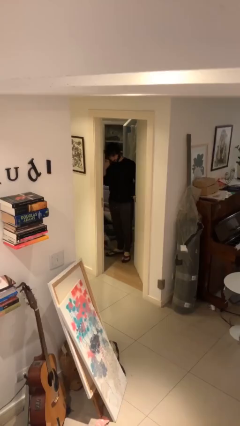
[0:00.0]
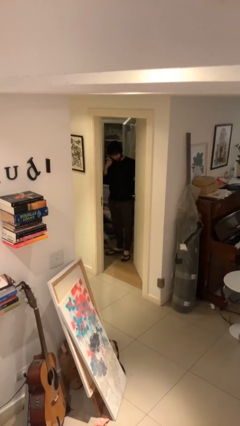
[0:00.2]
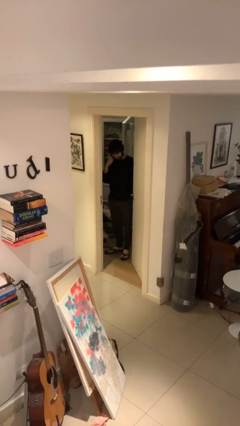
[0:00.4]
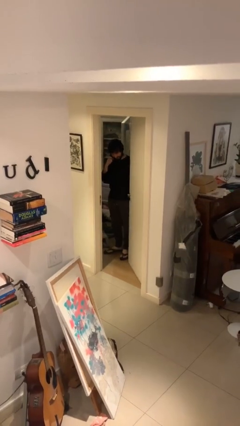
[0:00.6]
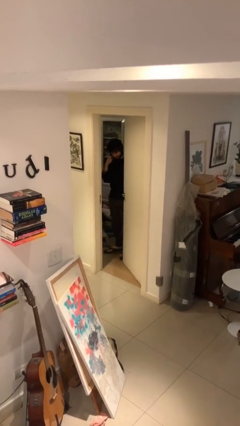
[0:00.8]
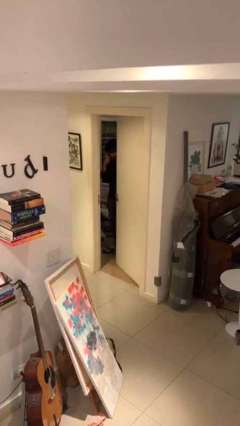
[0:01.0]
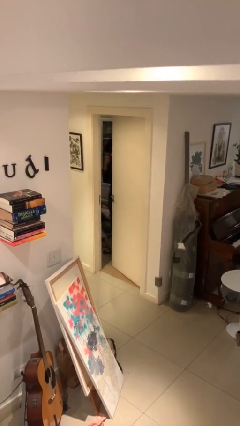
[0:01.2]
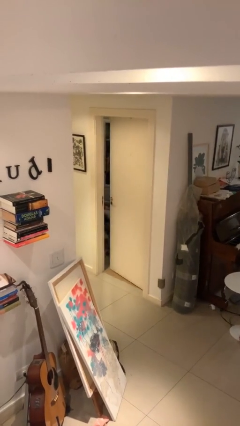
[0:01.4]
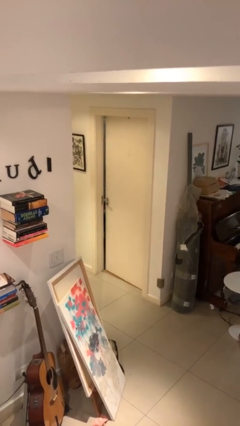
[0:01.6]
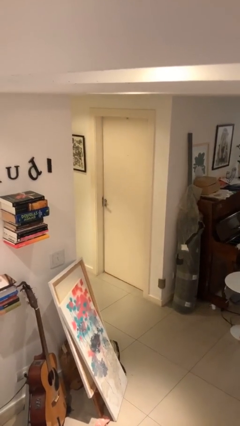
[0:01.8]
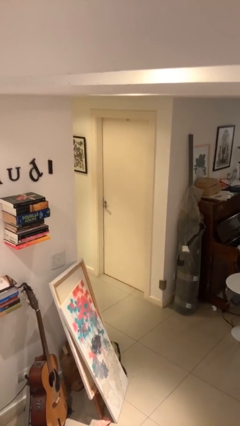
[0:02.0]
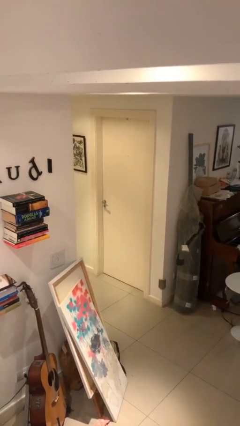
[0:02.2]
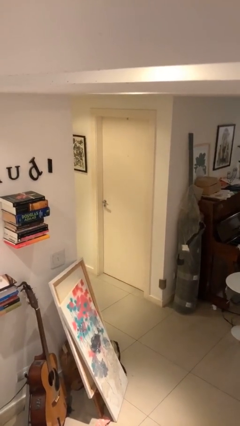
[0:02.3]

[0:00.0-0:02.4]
person closes facility door

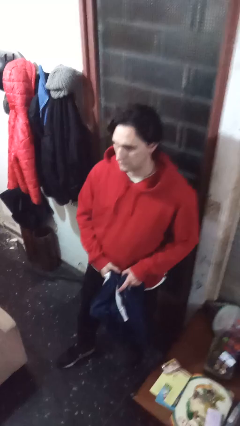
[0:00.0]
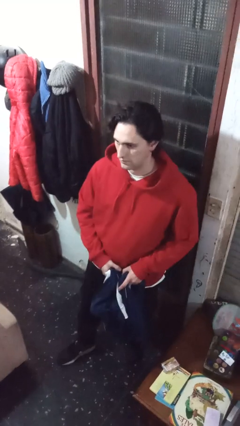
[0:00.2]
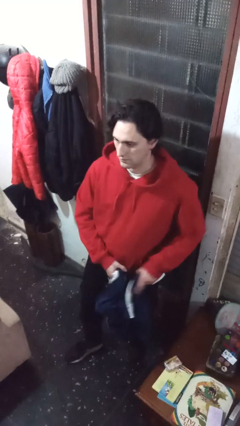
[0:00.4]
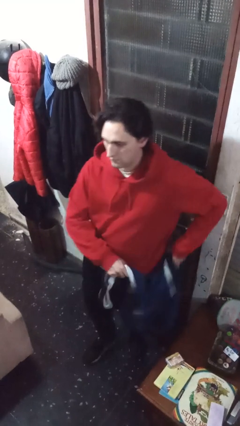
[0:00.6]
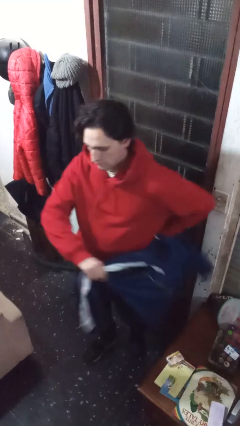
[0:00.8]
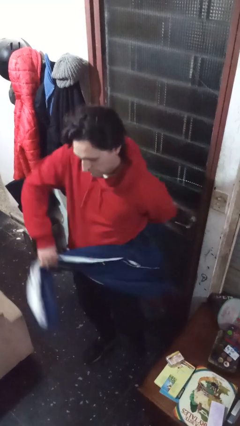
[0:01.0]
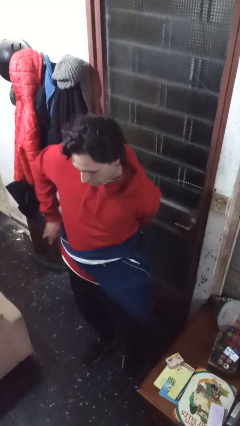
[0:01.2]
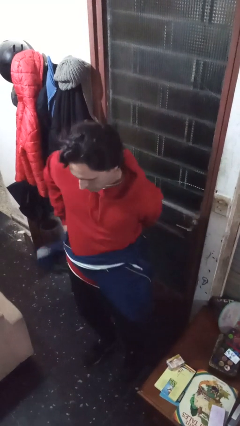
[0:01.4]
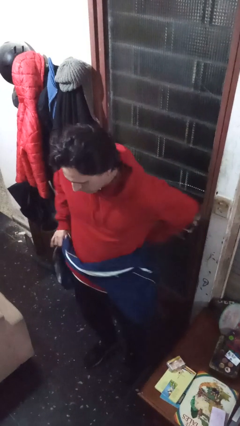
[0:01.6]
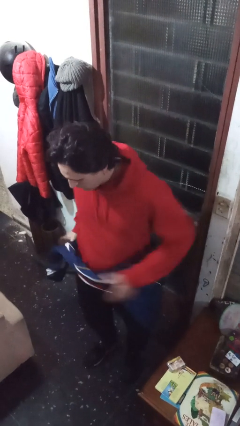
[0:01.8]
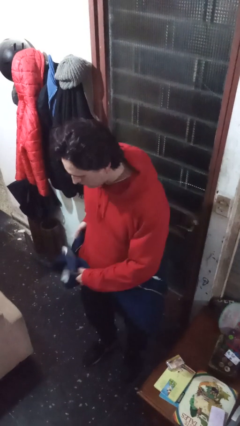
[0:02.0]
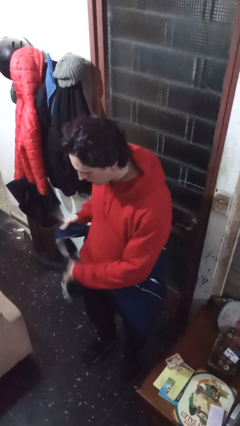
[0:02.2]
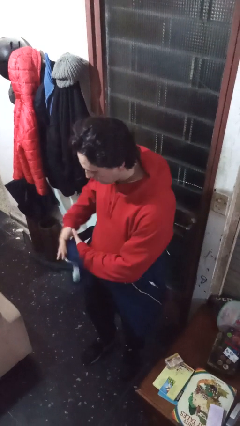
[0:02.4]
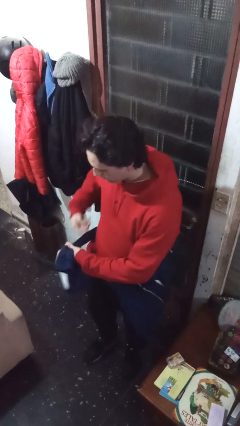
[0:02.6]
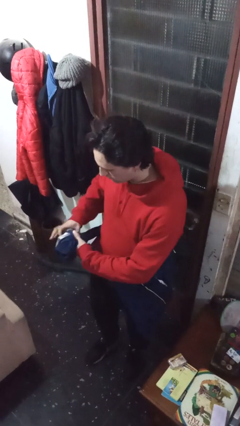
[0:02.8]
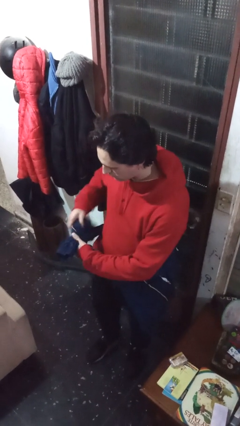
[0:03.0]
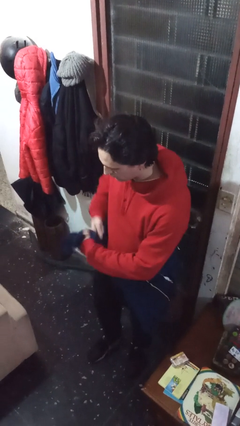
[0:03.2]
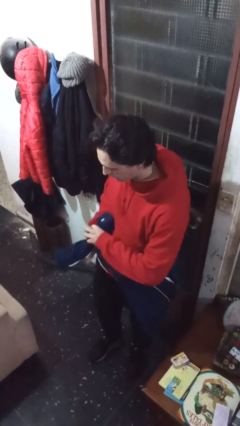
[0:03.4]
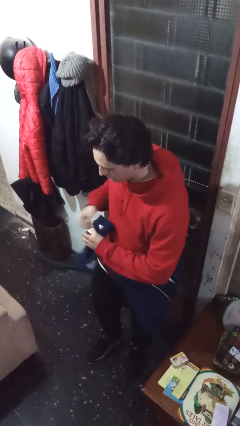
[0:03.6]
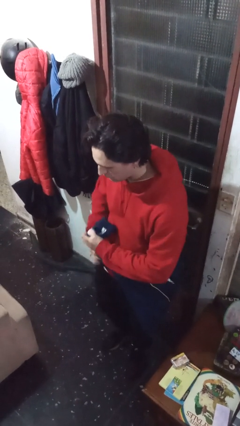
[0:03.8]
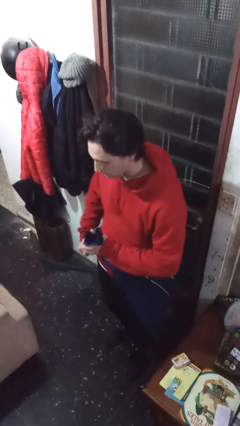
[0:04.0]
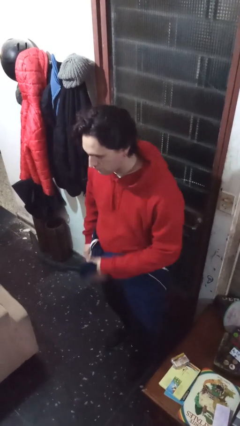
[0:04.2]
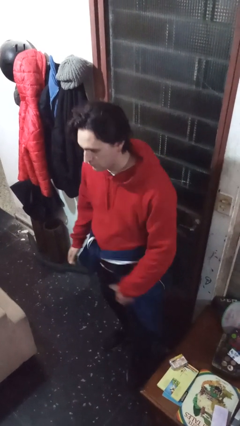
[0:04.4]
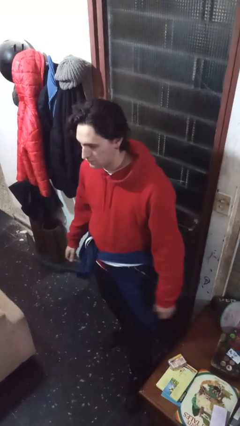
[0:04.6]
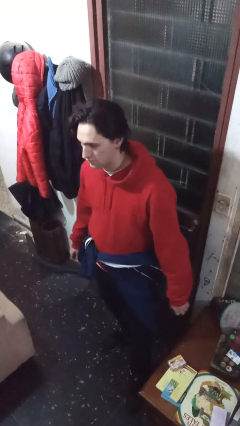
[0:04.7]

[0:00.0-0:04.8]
person ties jacket around waist

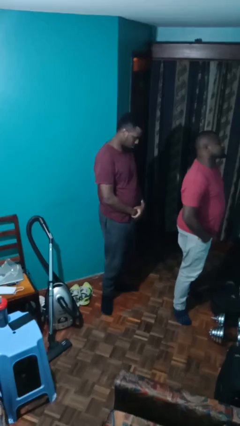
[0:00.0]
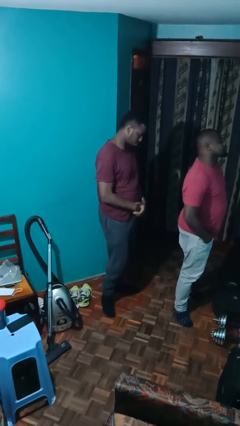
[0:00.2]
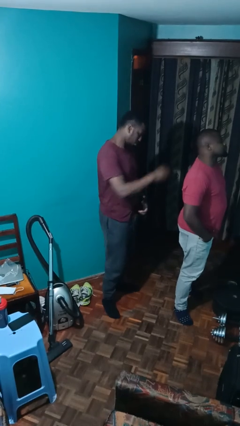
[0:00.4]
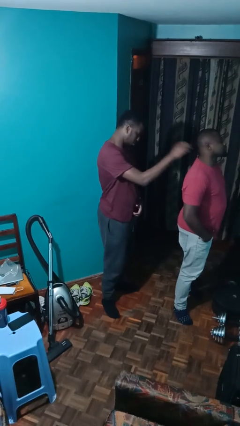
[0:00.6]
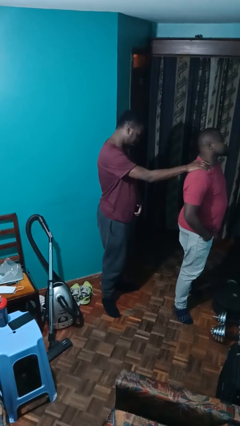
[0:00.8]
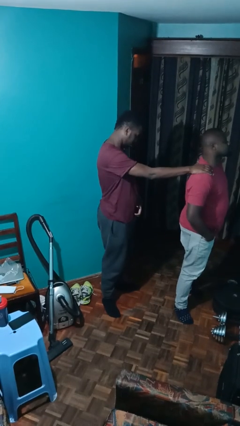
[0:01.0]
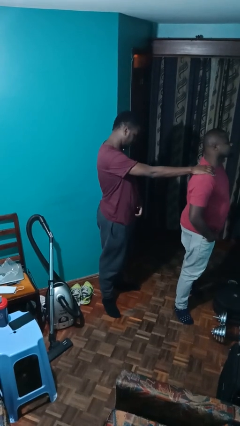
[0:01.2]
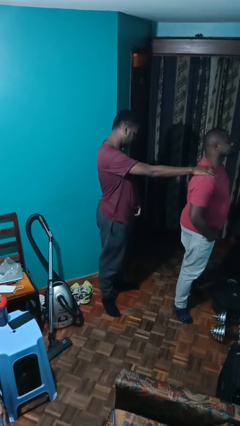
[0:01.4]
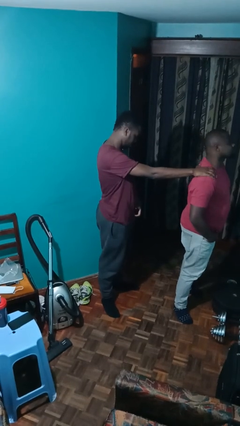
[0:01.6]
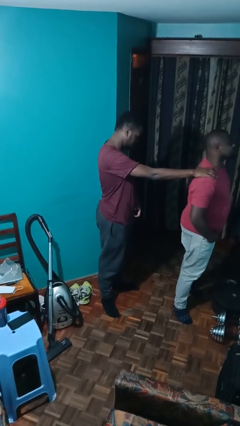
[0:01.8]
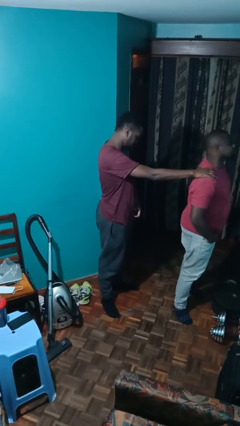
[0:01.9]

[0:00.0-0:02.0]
person grabs person by shoulder

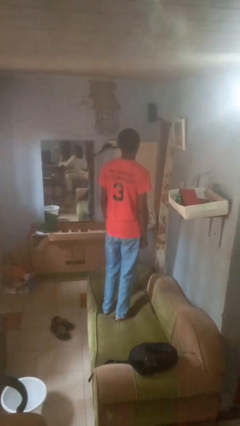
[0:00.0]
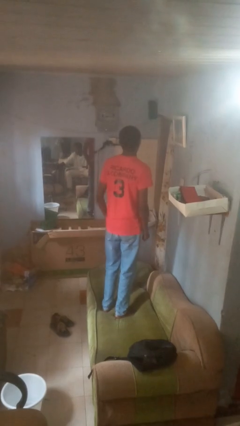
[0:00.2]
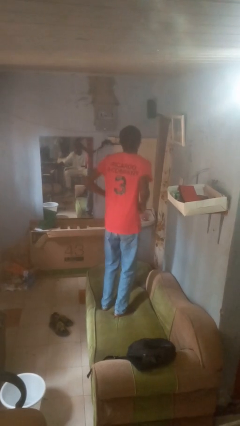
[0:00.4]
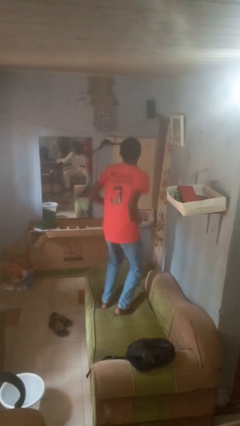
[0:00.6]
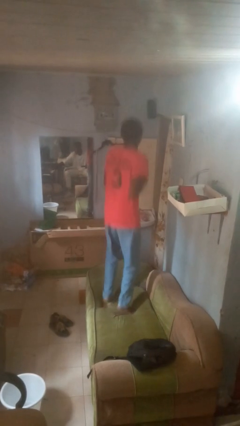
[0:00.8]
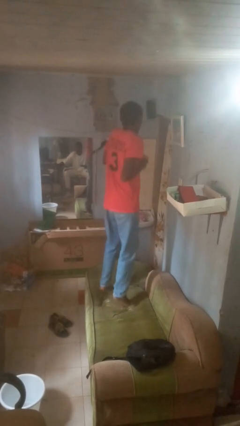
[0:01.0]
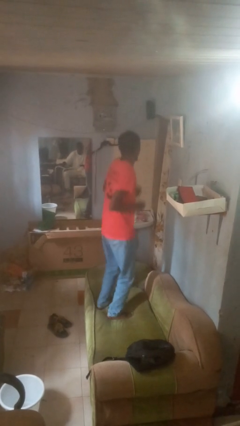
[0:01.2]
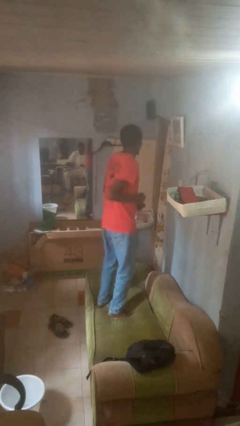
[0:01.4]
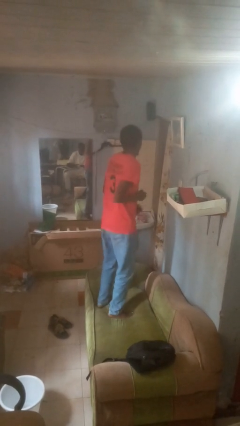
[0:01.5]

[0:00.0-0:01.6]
person jumps on couch

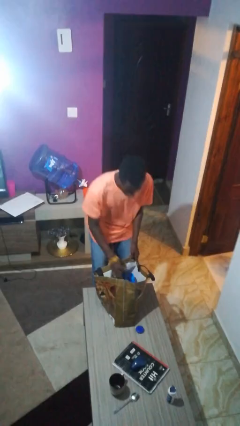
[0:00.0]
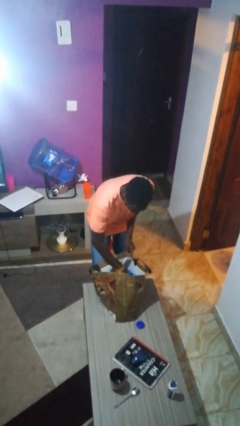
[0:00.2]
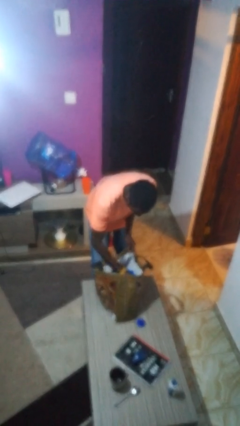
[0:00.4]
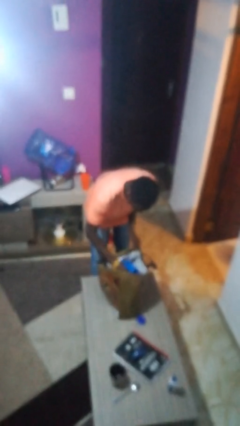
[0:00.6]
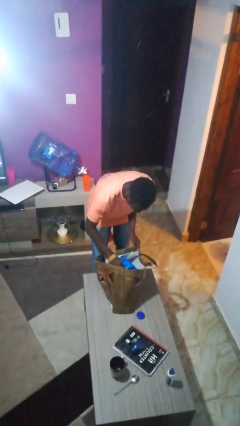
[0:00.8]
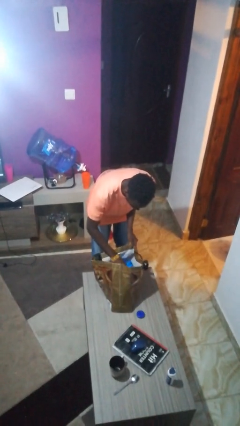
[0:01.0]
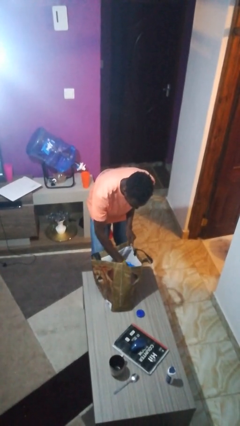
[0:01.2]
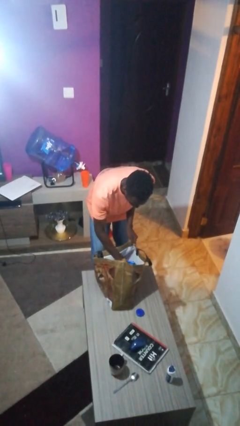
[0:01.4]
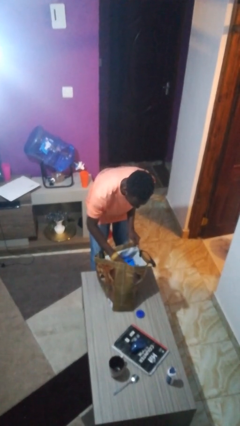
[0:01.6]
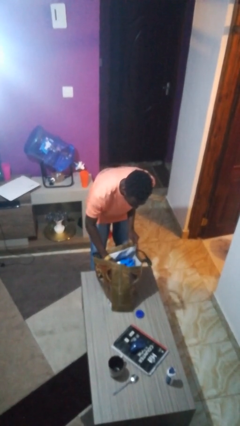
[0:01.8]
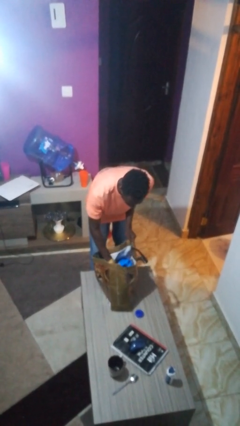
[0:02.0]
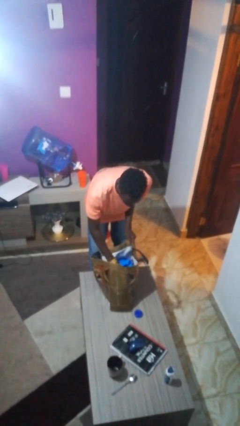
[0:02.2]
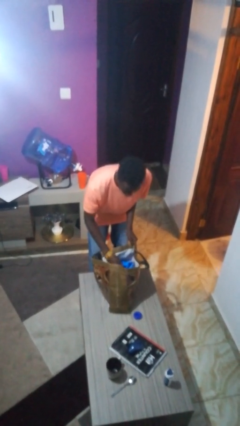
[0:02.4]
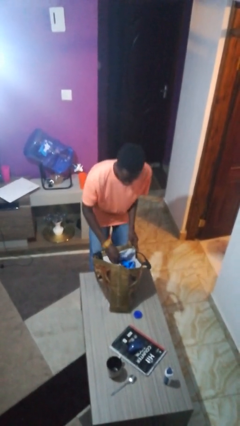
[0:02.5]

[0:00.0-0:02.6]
person searches in bag

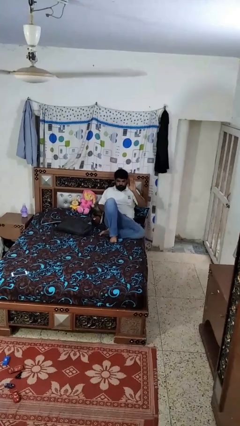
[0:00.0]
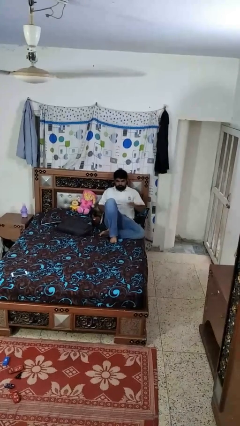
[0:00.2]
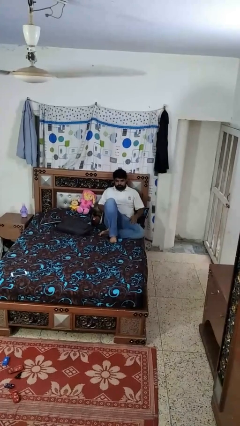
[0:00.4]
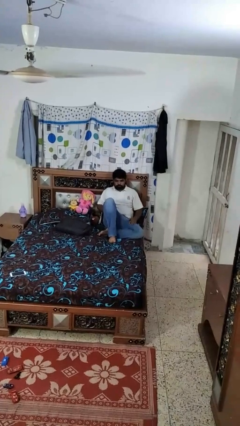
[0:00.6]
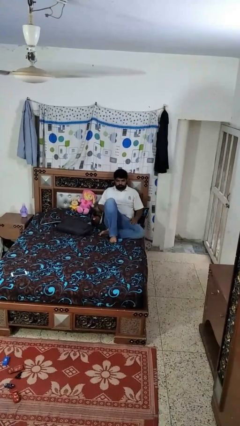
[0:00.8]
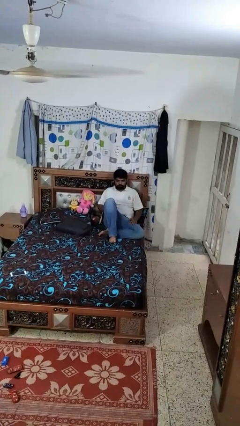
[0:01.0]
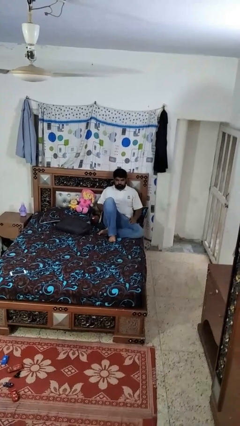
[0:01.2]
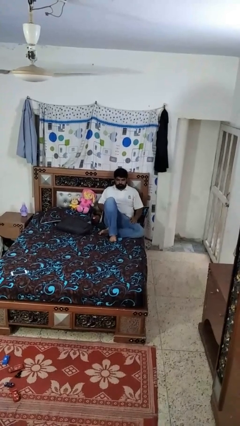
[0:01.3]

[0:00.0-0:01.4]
person gestures lower hand

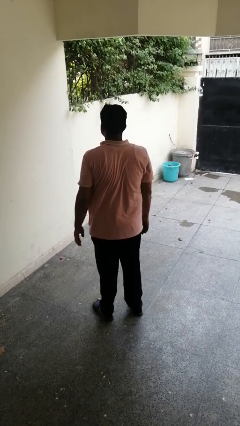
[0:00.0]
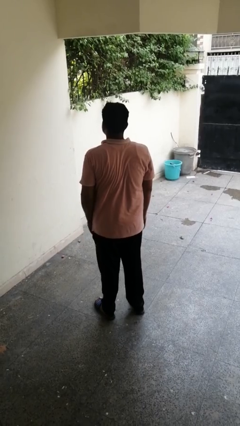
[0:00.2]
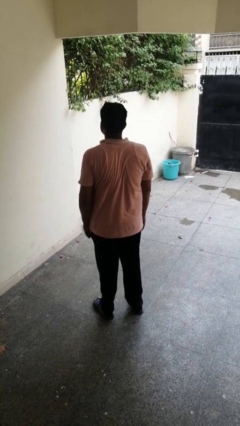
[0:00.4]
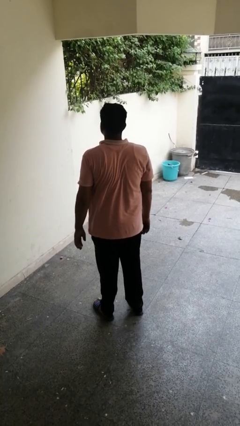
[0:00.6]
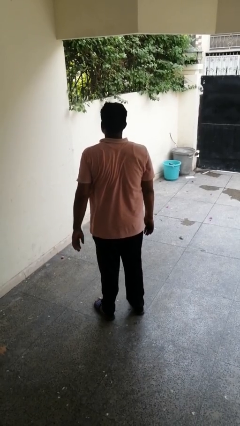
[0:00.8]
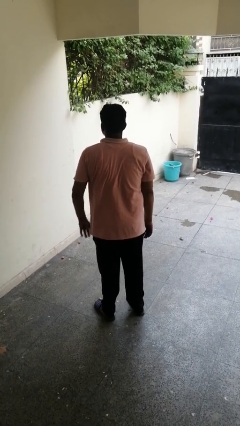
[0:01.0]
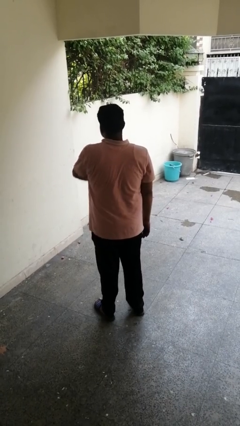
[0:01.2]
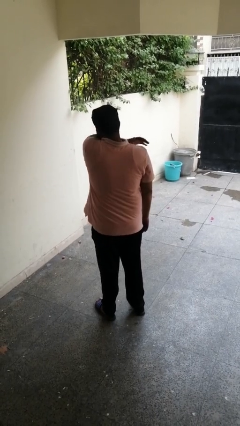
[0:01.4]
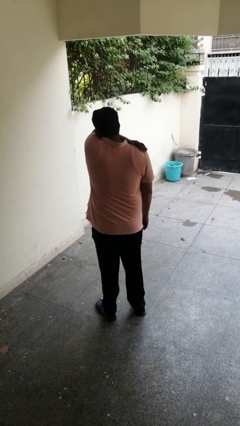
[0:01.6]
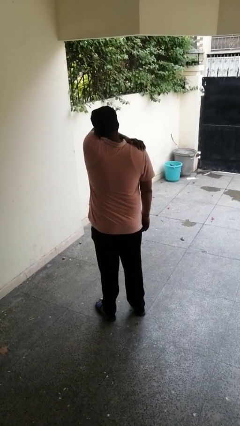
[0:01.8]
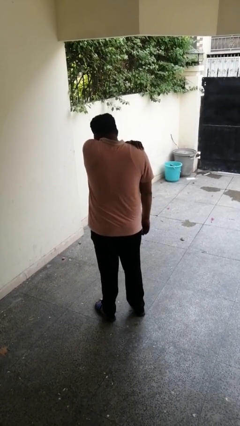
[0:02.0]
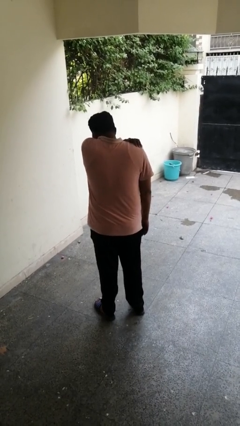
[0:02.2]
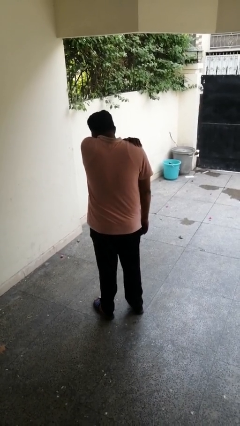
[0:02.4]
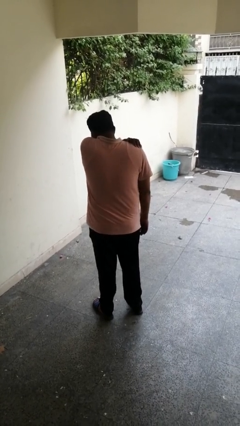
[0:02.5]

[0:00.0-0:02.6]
person sneezes into arm
